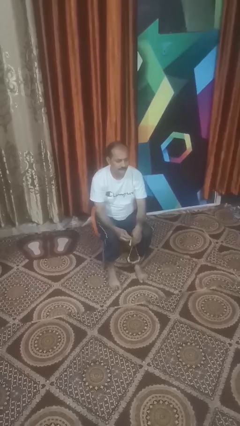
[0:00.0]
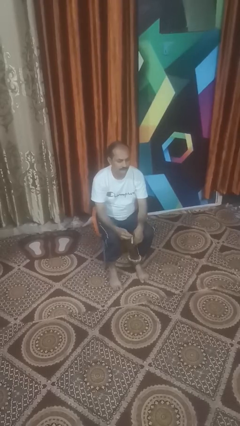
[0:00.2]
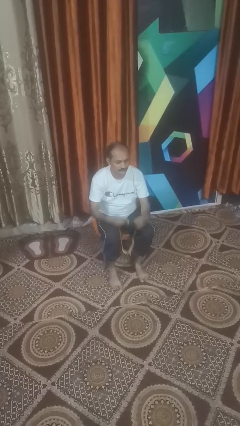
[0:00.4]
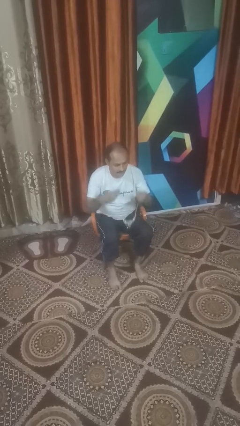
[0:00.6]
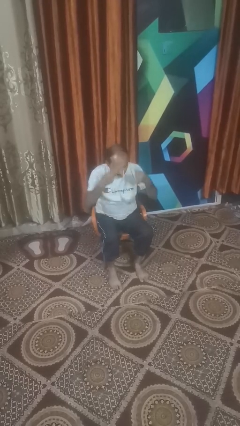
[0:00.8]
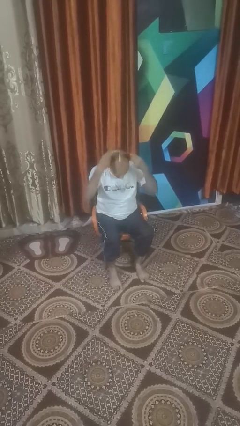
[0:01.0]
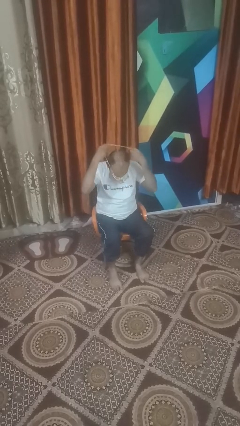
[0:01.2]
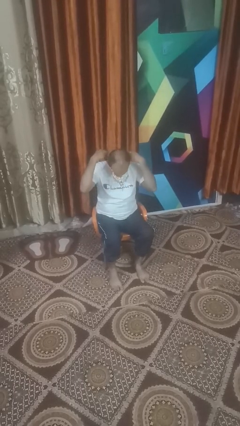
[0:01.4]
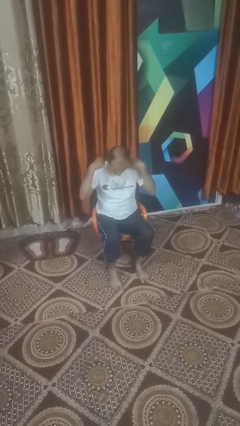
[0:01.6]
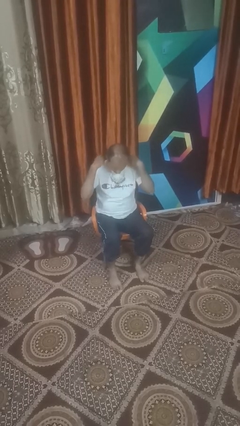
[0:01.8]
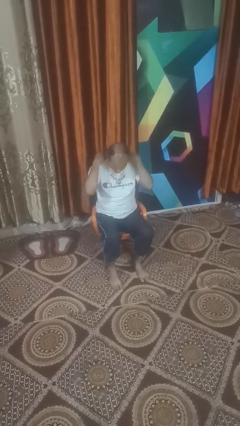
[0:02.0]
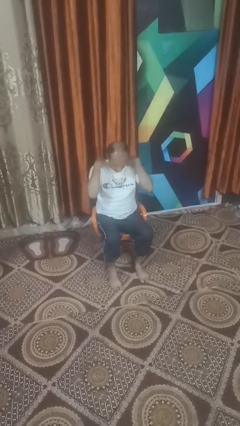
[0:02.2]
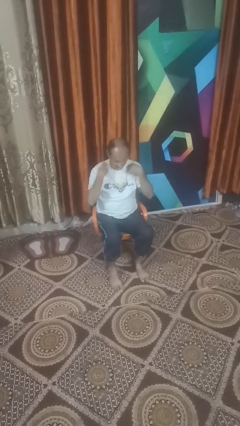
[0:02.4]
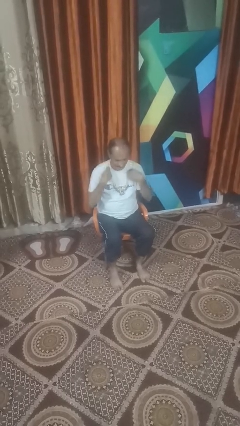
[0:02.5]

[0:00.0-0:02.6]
person puts on necklace

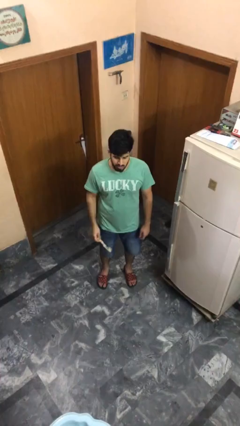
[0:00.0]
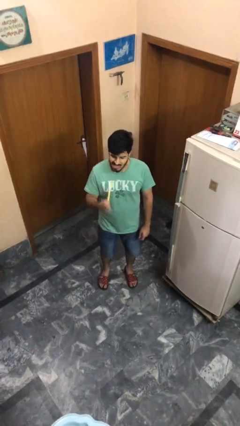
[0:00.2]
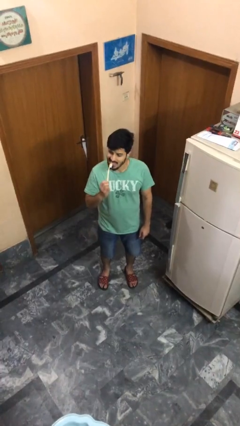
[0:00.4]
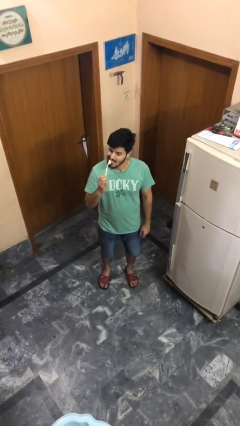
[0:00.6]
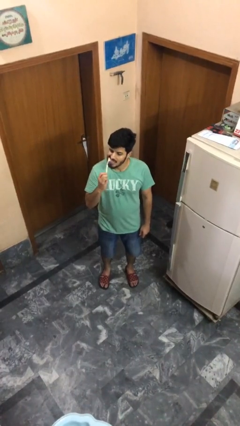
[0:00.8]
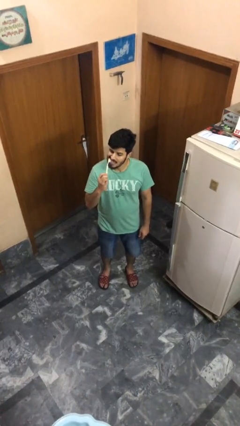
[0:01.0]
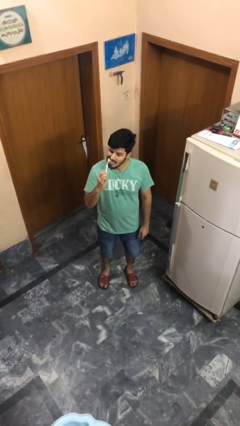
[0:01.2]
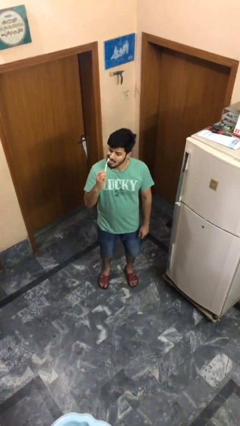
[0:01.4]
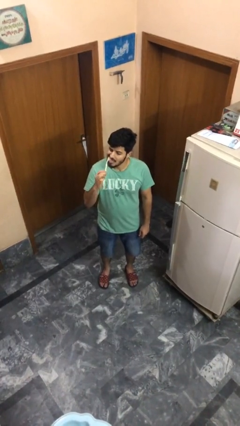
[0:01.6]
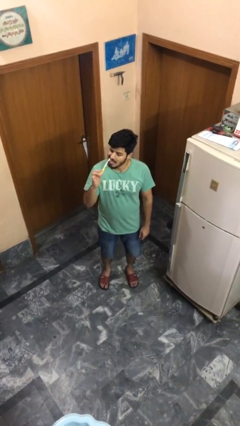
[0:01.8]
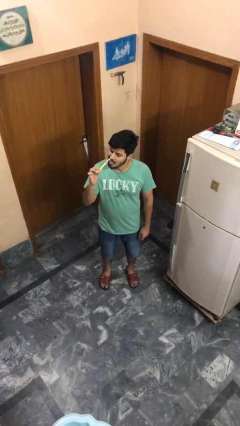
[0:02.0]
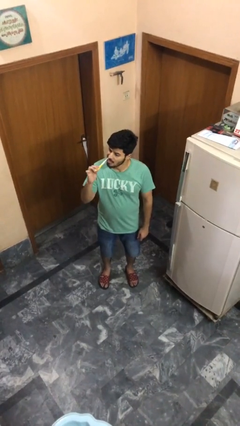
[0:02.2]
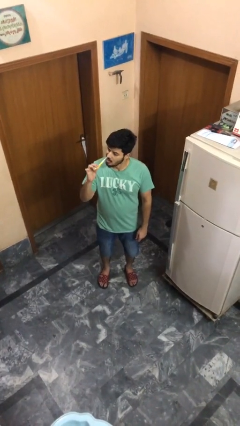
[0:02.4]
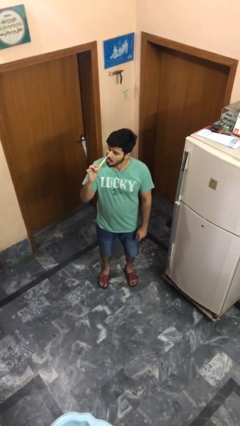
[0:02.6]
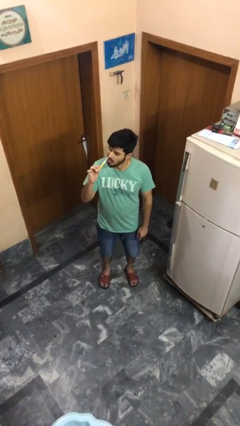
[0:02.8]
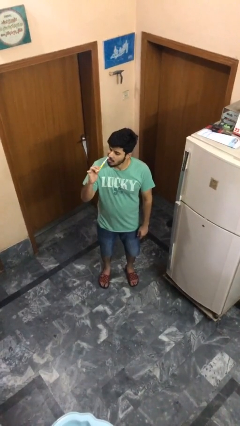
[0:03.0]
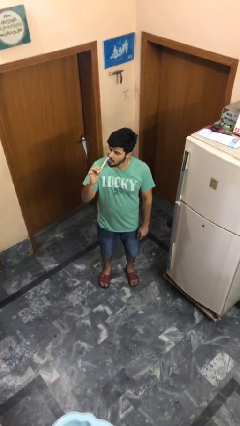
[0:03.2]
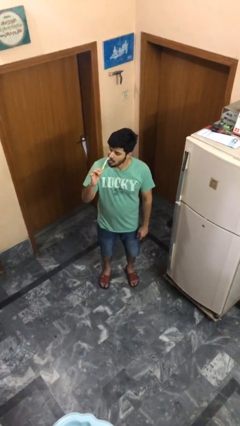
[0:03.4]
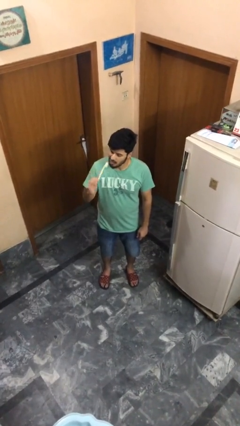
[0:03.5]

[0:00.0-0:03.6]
person brushes teeth

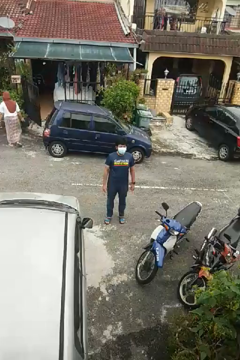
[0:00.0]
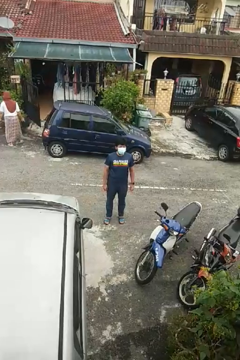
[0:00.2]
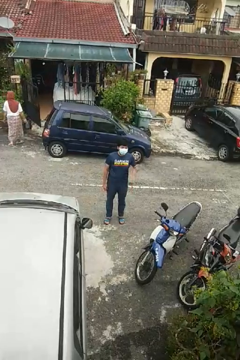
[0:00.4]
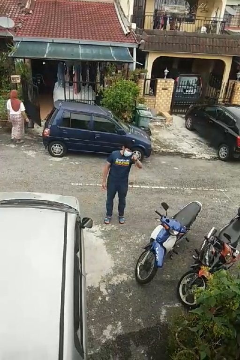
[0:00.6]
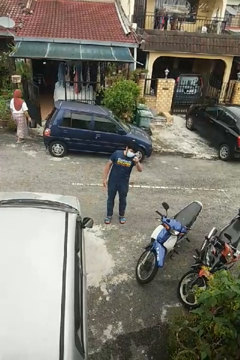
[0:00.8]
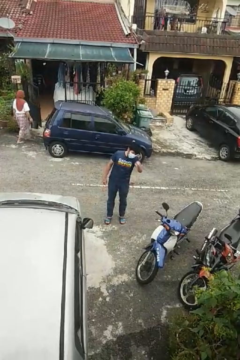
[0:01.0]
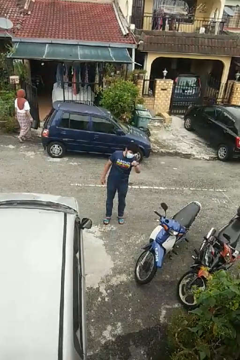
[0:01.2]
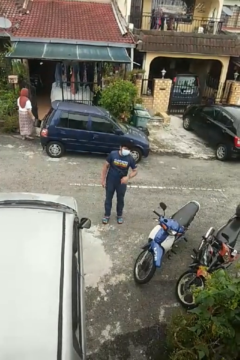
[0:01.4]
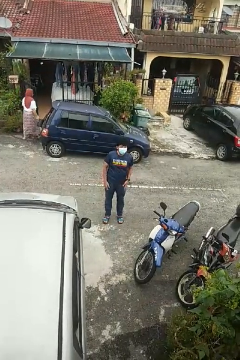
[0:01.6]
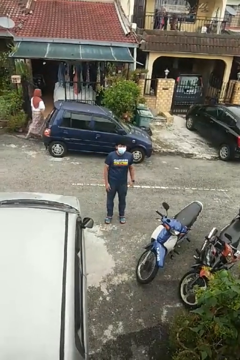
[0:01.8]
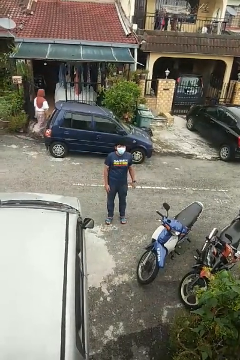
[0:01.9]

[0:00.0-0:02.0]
person points at person

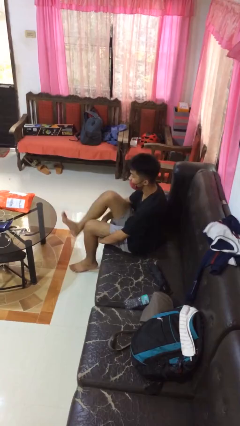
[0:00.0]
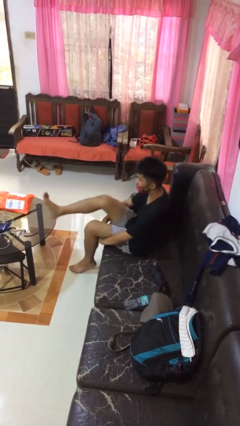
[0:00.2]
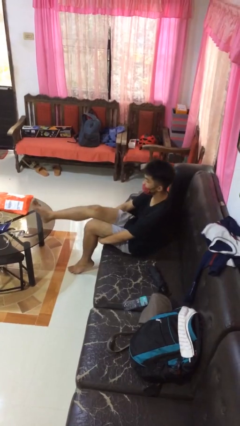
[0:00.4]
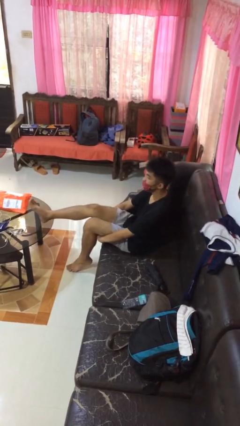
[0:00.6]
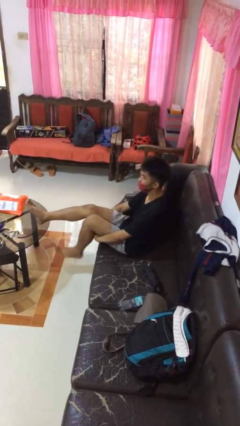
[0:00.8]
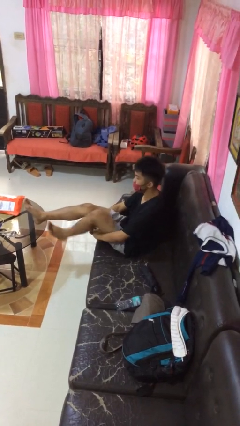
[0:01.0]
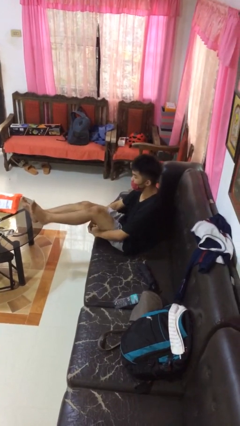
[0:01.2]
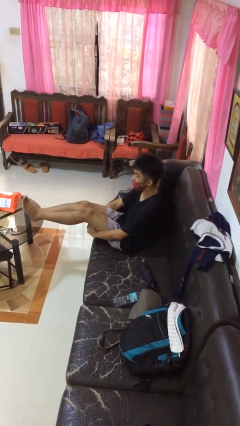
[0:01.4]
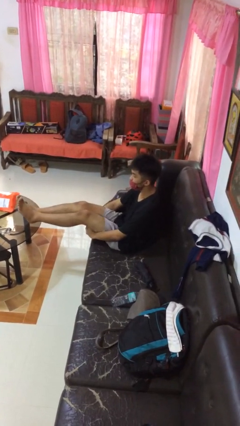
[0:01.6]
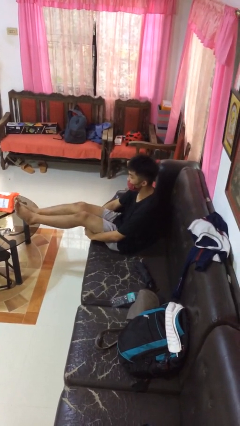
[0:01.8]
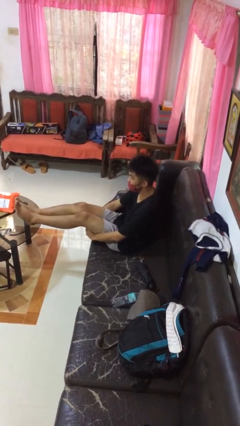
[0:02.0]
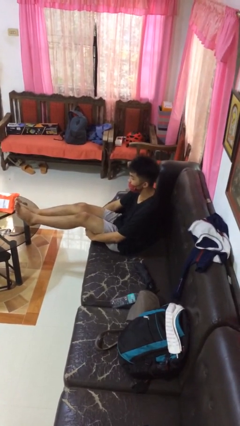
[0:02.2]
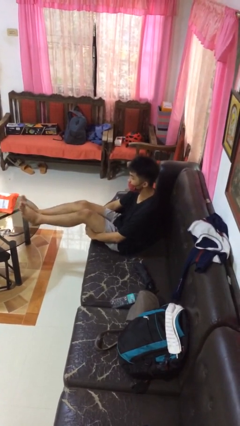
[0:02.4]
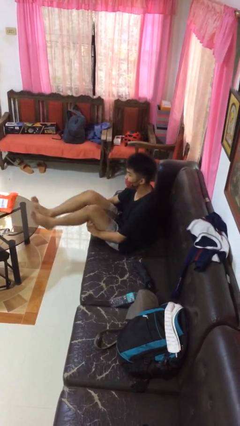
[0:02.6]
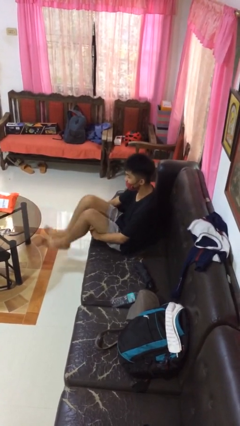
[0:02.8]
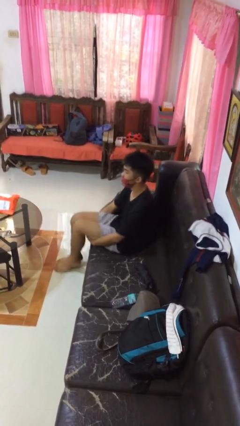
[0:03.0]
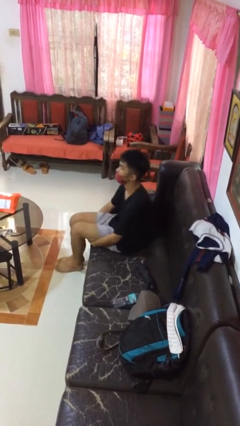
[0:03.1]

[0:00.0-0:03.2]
person puts feet up

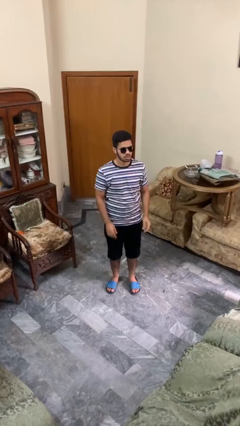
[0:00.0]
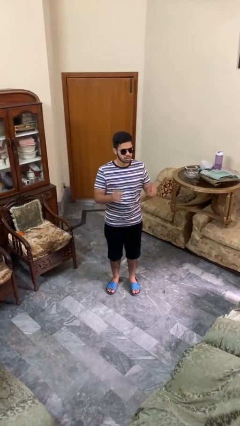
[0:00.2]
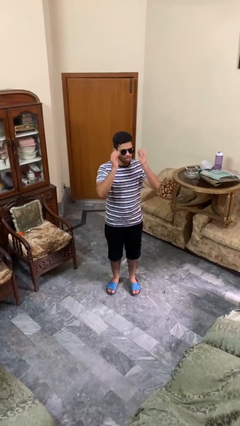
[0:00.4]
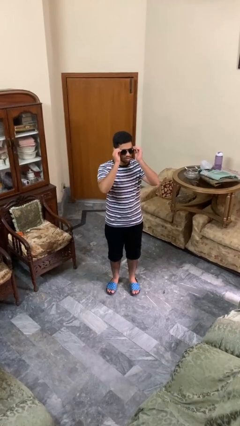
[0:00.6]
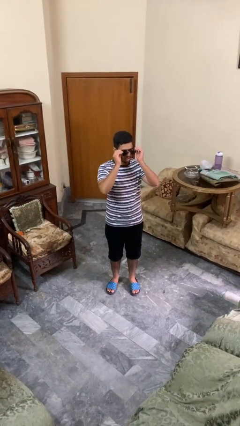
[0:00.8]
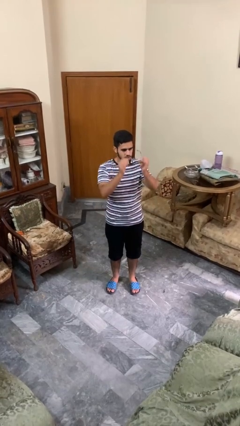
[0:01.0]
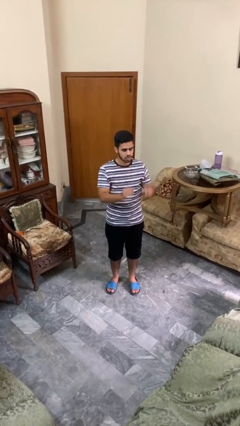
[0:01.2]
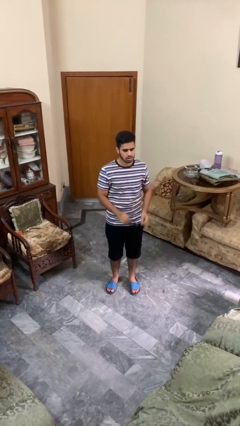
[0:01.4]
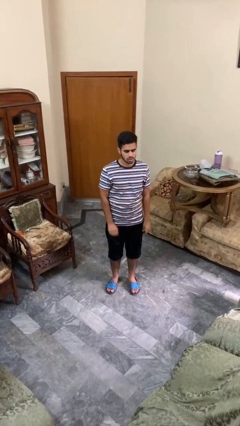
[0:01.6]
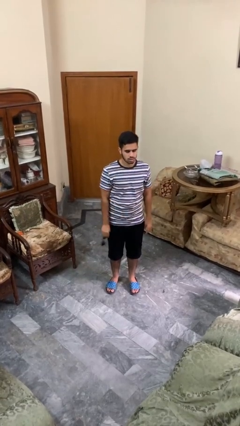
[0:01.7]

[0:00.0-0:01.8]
person takes off sunglasses

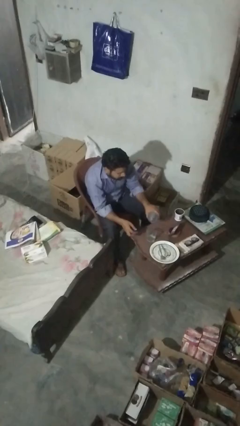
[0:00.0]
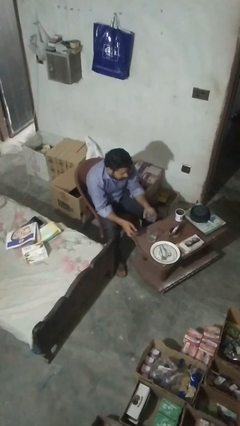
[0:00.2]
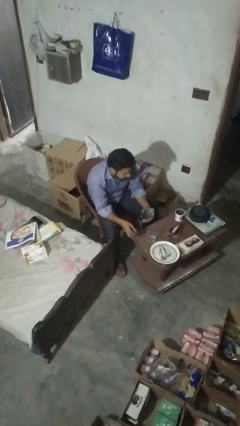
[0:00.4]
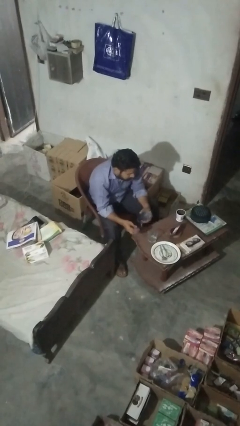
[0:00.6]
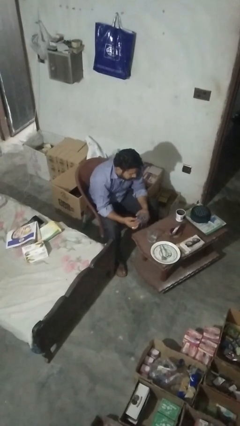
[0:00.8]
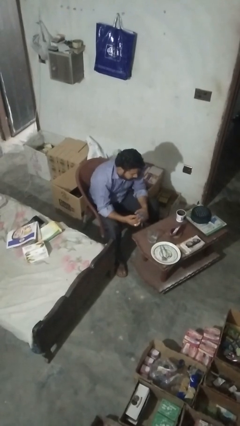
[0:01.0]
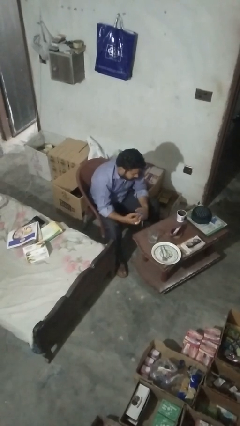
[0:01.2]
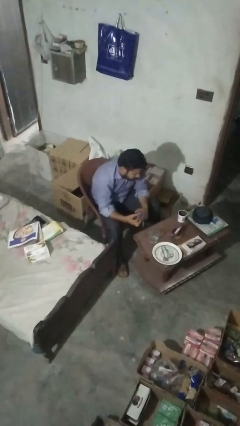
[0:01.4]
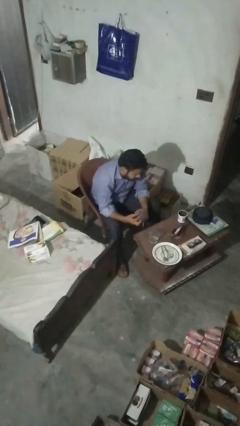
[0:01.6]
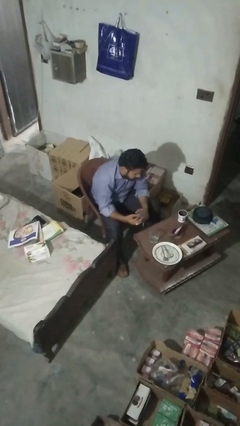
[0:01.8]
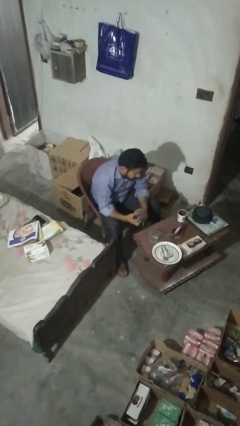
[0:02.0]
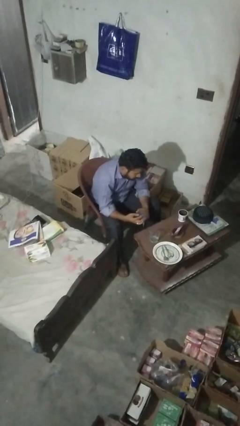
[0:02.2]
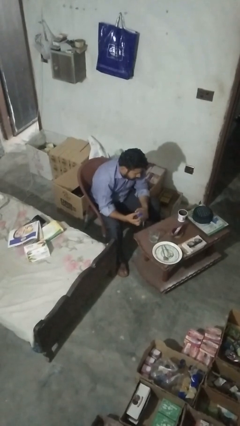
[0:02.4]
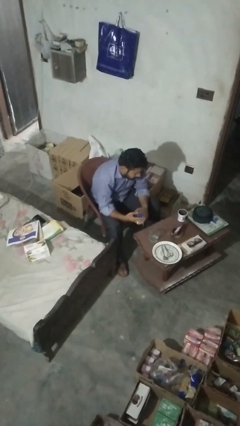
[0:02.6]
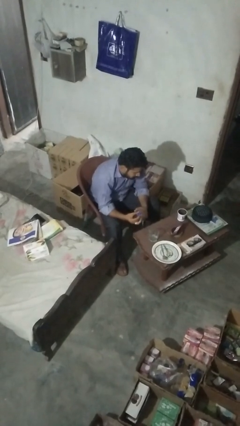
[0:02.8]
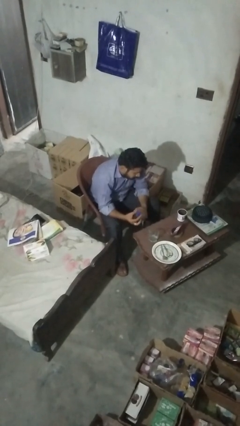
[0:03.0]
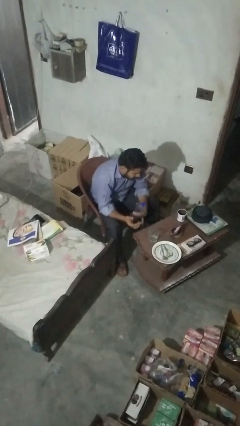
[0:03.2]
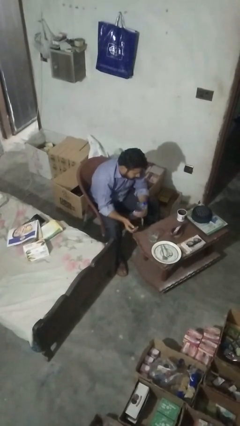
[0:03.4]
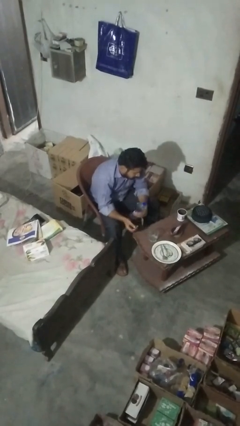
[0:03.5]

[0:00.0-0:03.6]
person screws lid to bottle

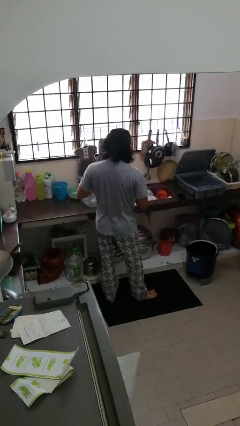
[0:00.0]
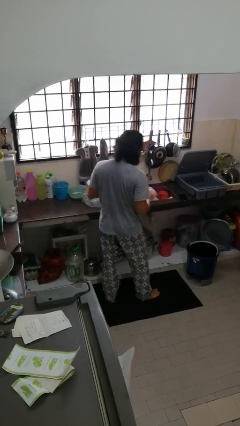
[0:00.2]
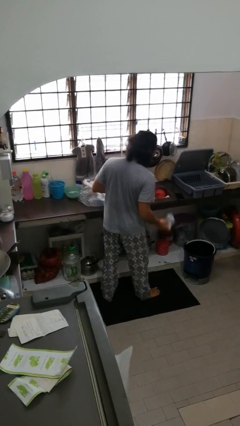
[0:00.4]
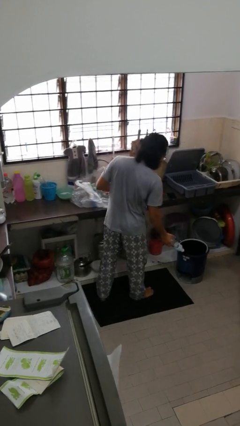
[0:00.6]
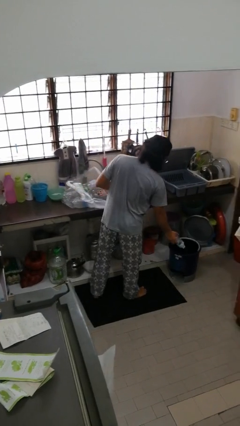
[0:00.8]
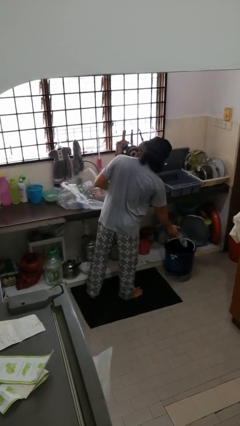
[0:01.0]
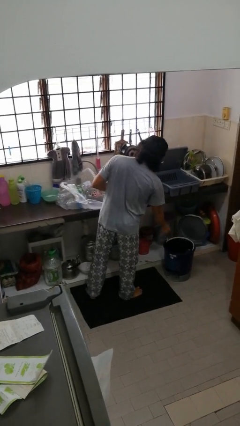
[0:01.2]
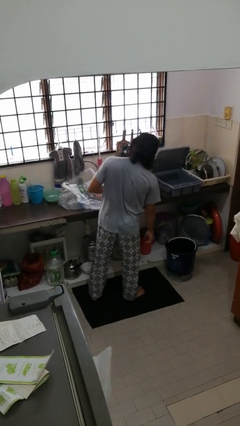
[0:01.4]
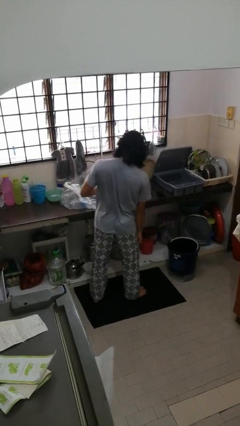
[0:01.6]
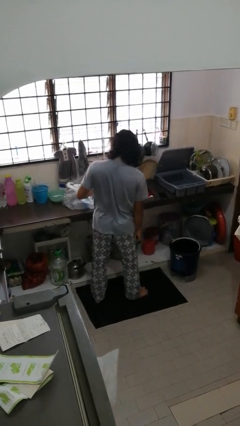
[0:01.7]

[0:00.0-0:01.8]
person discards trash
